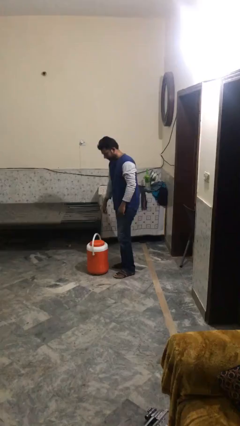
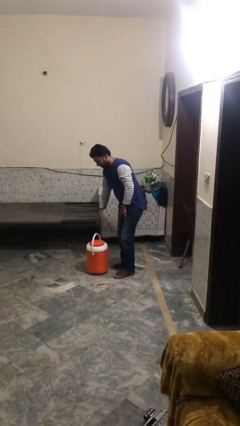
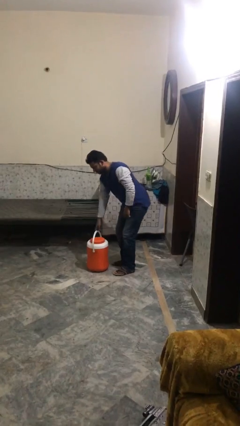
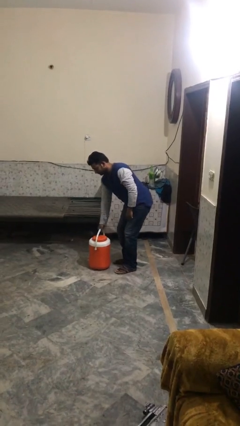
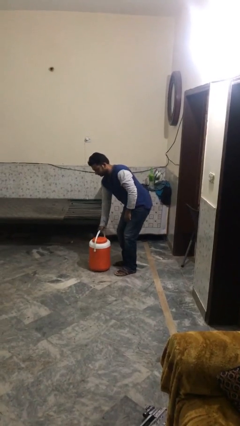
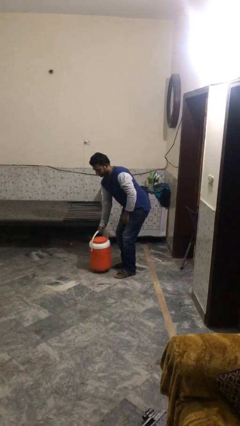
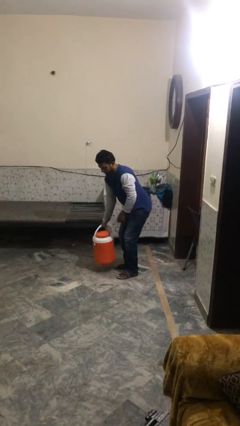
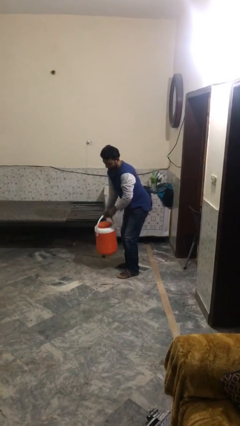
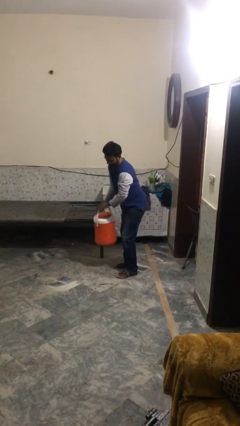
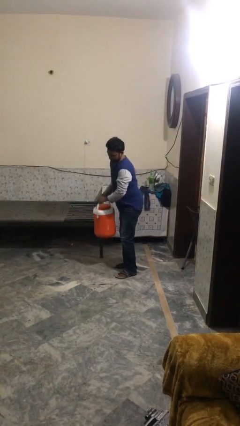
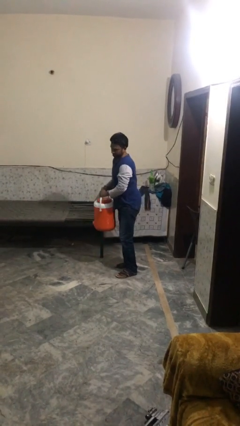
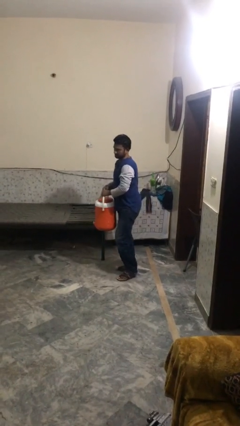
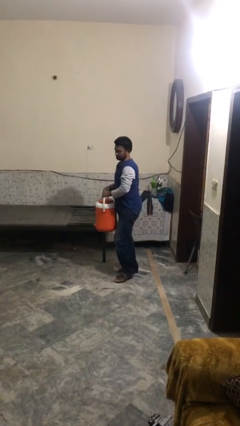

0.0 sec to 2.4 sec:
person picks up object from floor

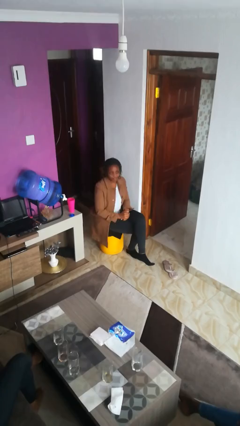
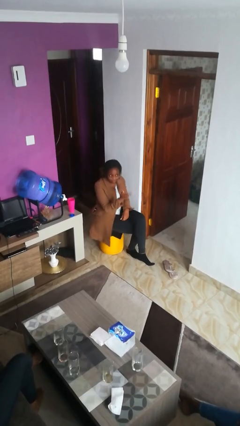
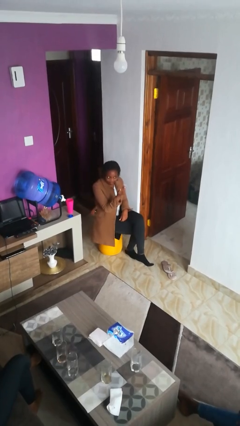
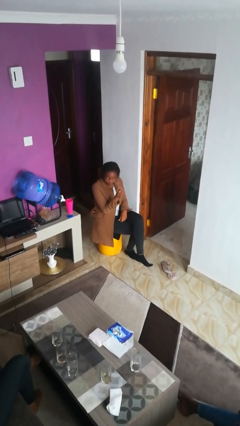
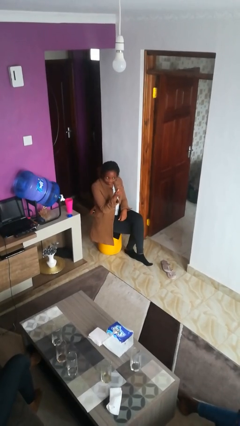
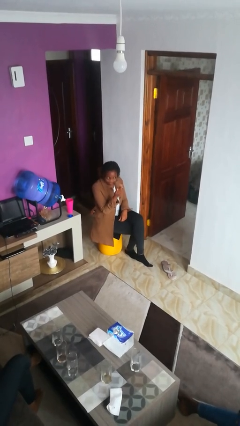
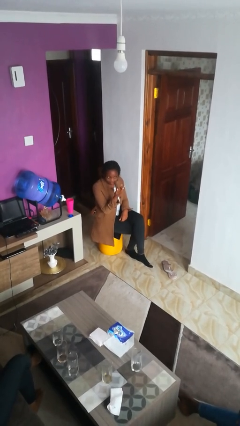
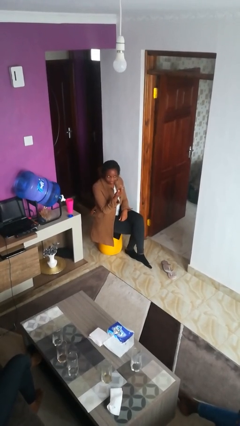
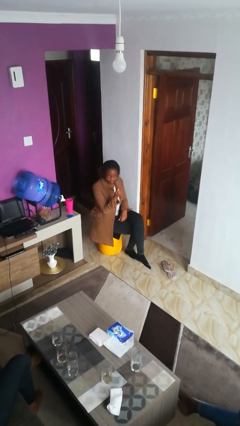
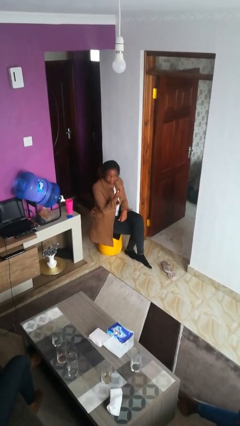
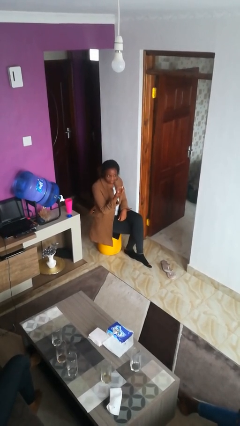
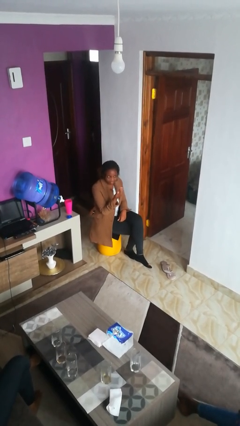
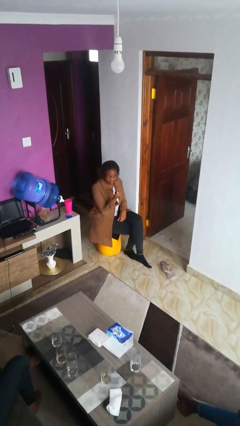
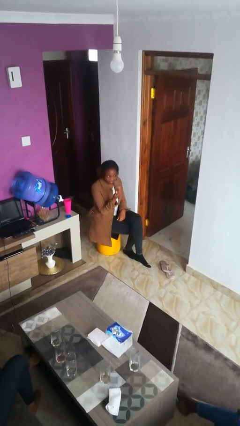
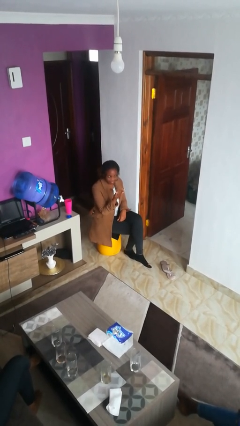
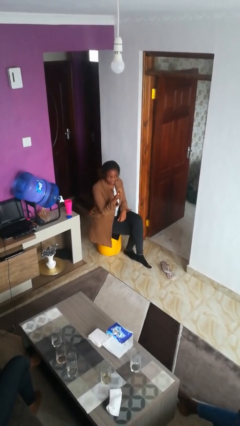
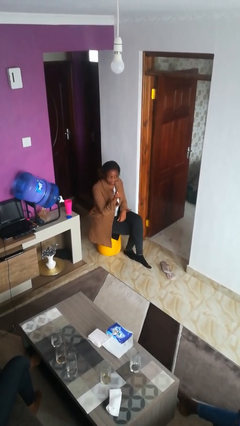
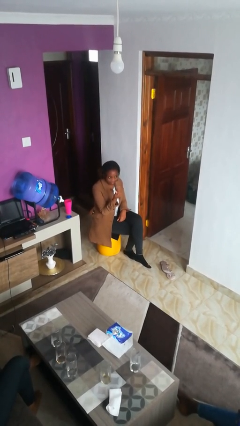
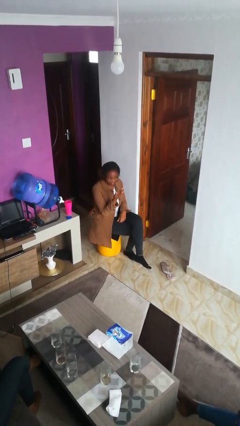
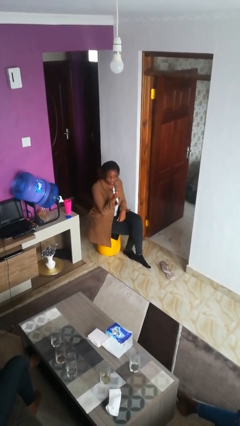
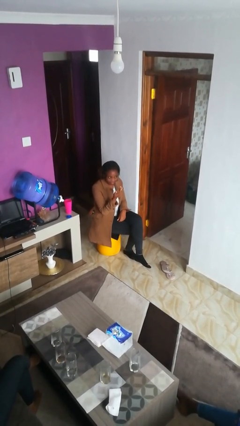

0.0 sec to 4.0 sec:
person gestures come here

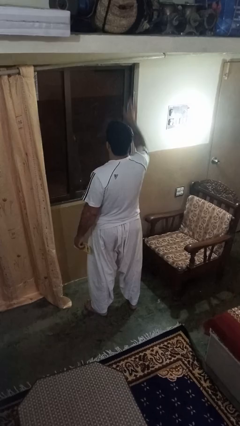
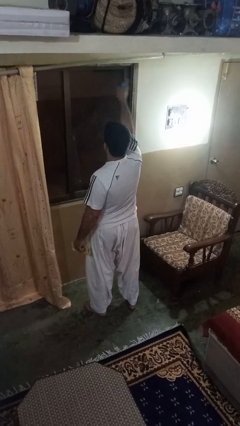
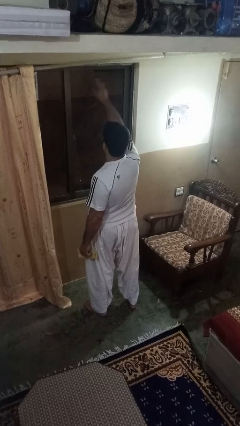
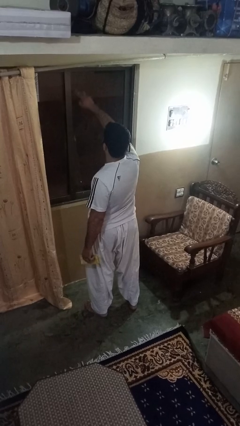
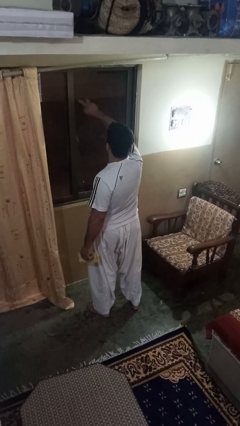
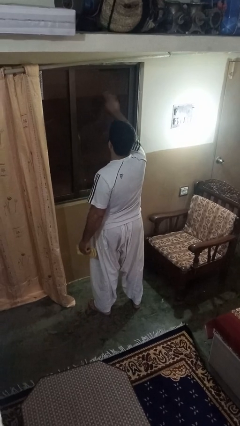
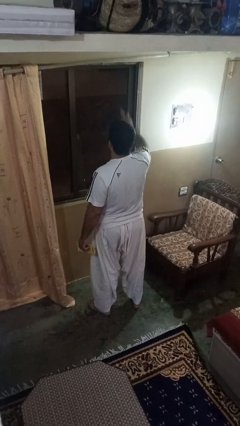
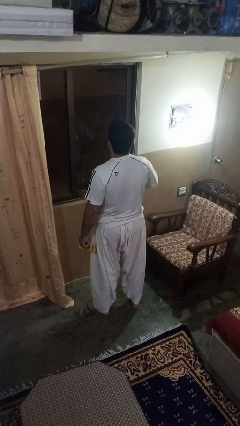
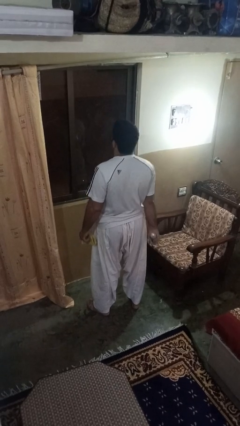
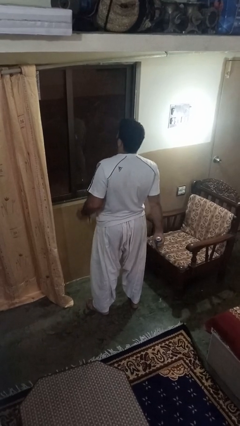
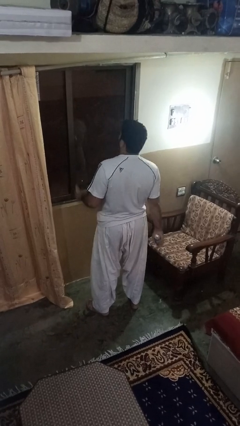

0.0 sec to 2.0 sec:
person sprays from bottle

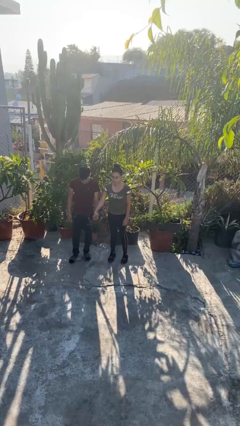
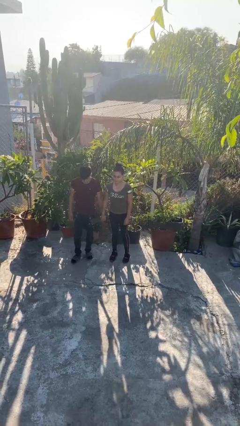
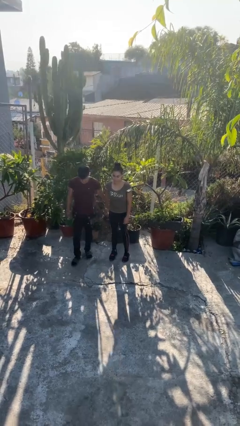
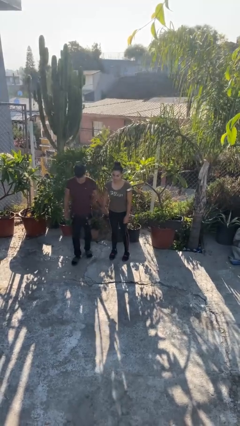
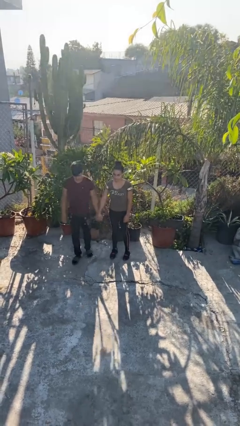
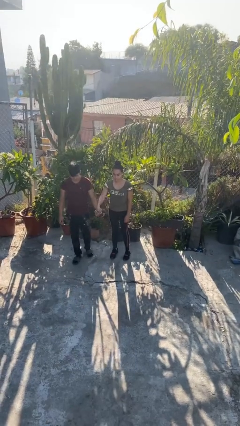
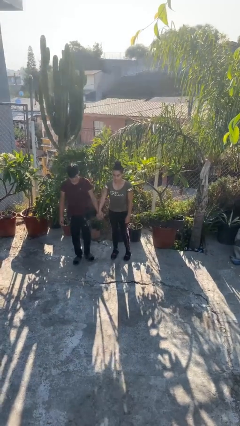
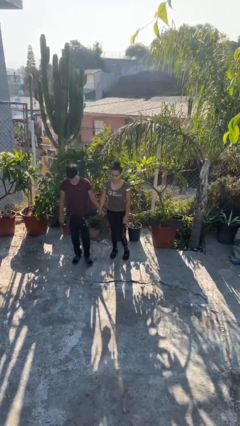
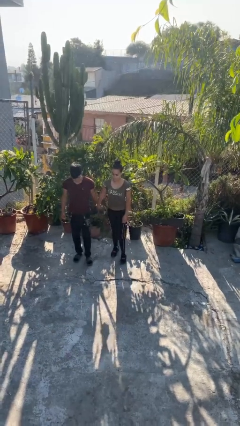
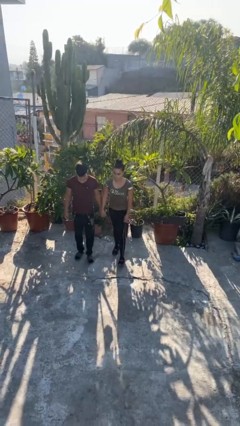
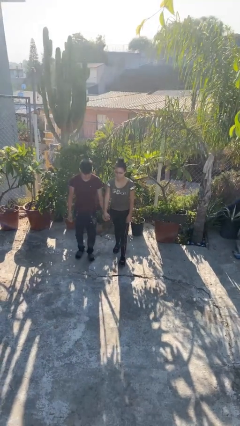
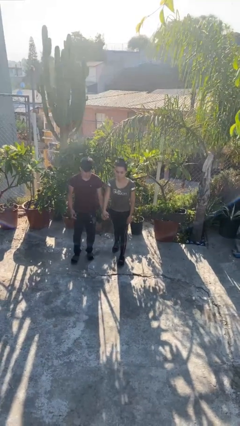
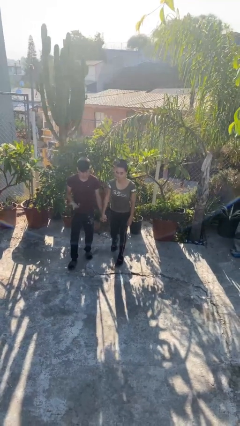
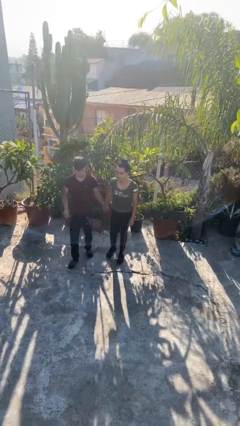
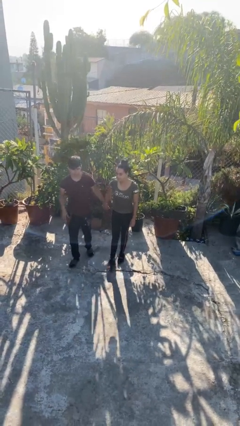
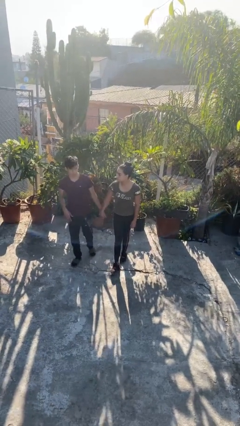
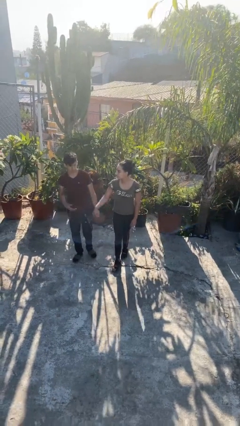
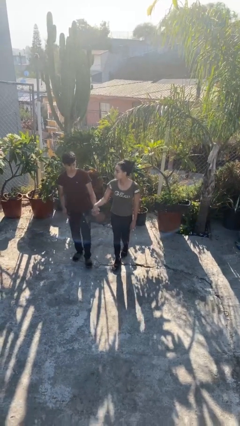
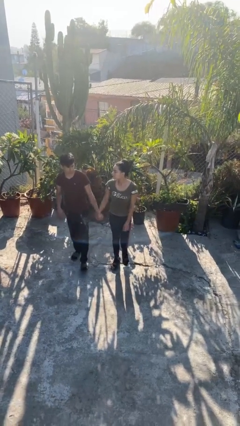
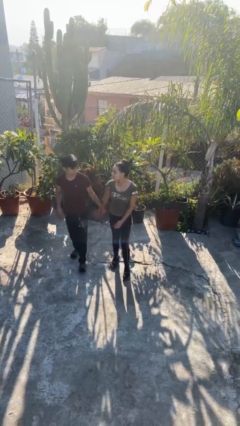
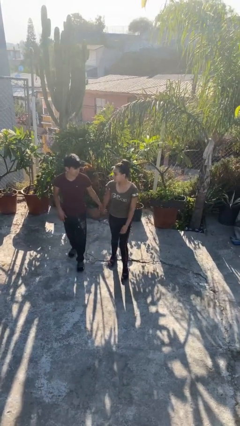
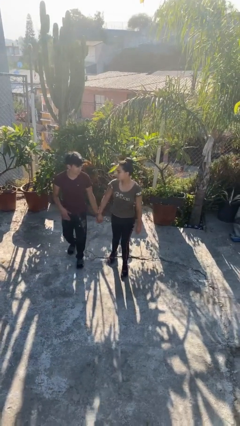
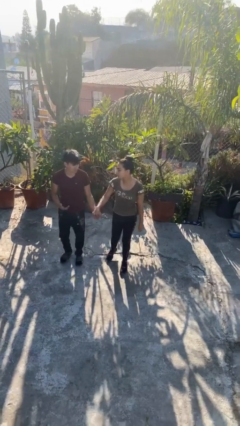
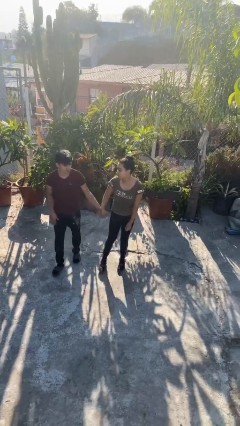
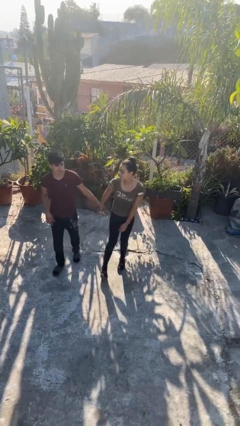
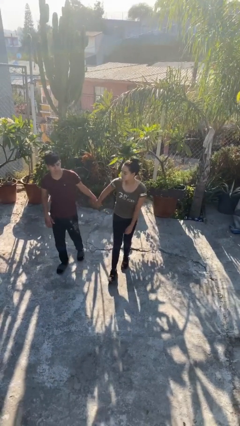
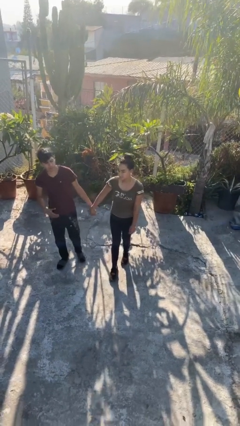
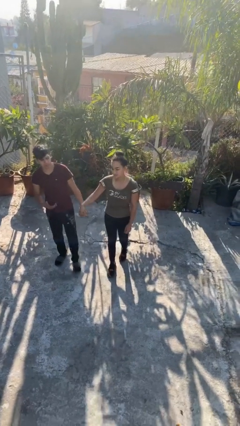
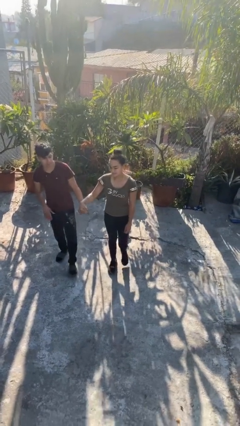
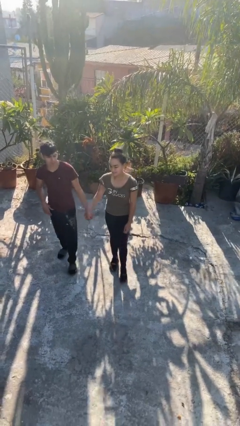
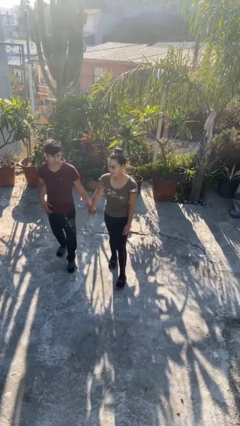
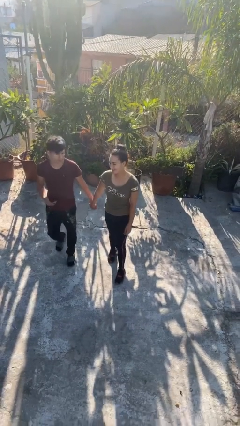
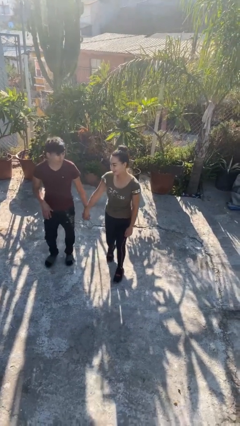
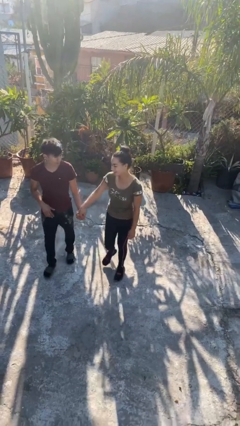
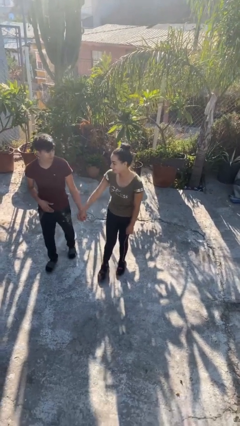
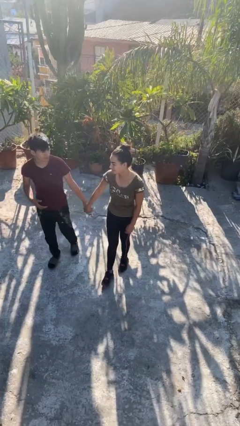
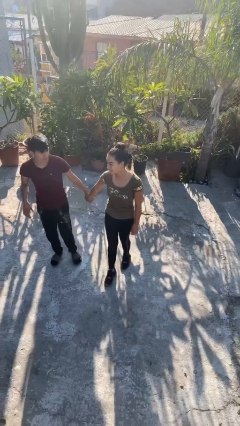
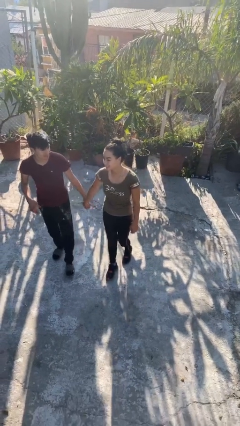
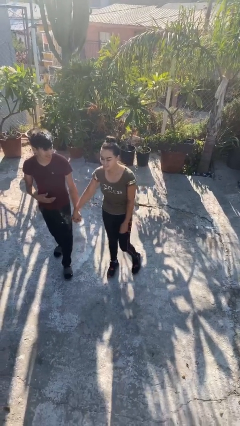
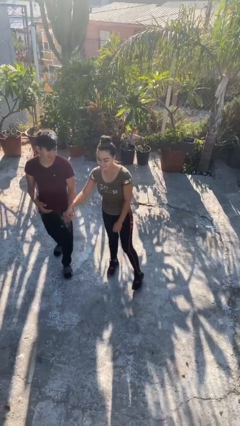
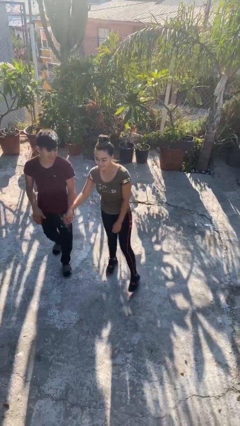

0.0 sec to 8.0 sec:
person holds hand

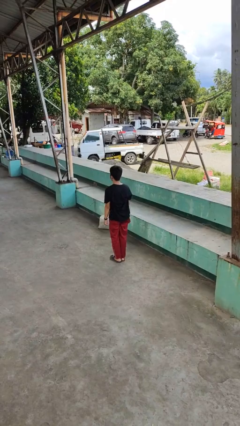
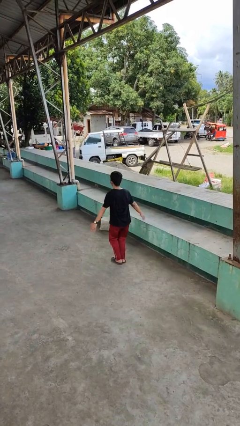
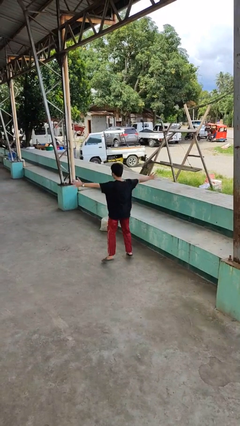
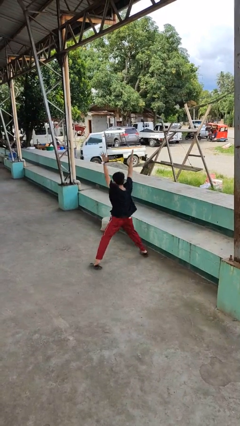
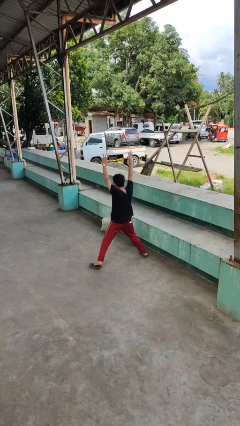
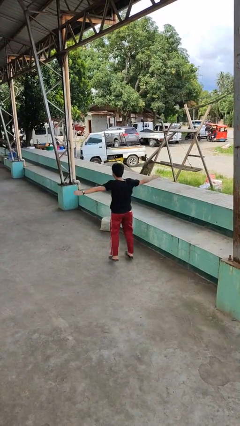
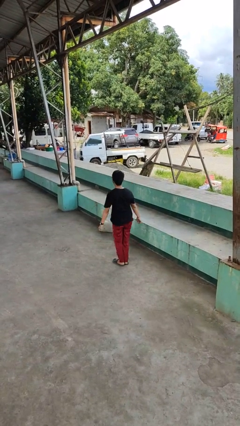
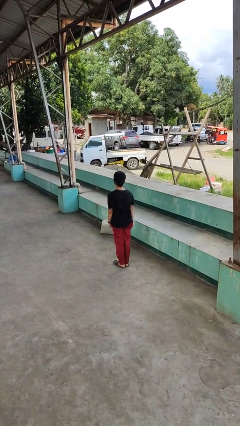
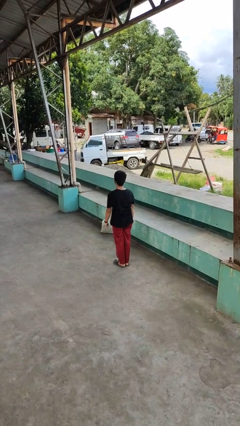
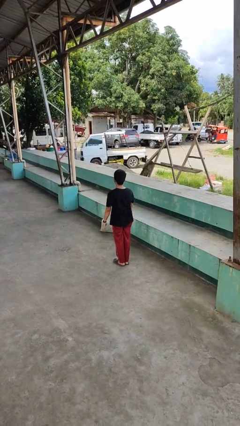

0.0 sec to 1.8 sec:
person exercises with jumping jacks
